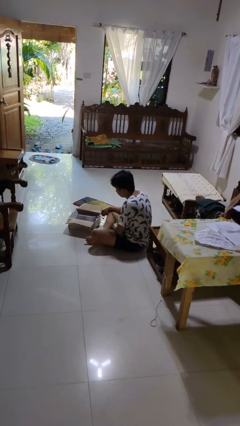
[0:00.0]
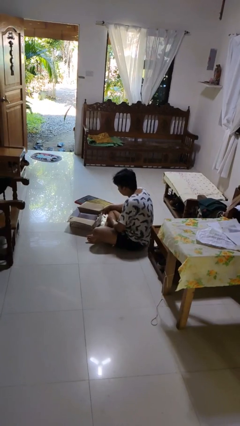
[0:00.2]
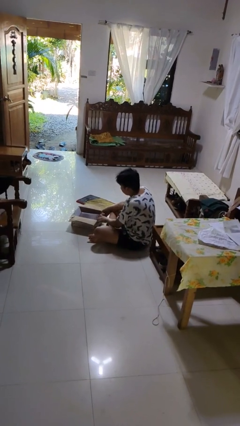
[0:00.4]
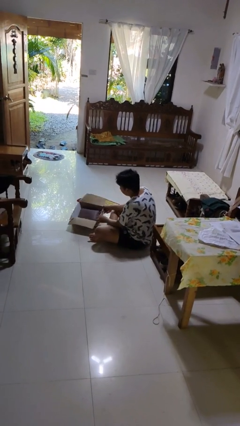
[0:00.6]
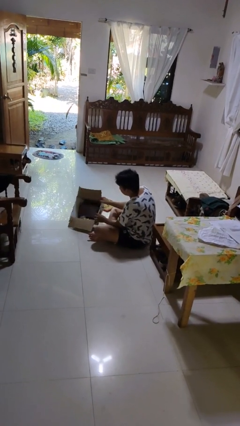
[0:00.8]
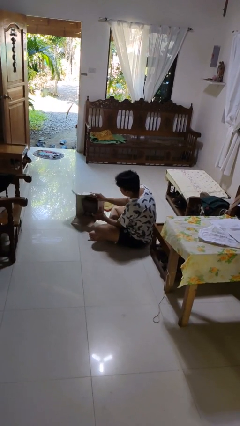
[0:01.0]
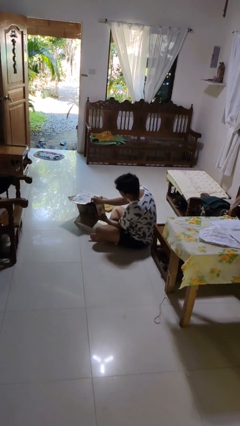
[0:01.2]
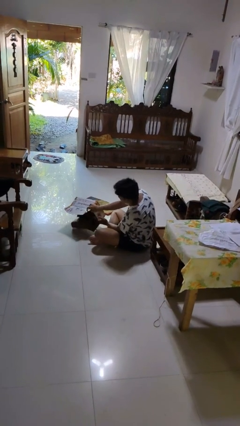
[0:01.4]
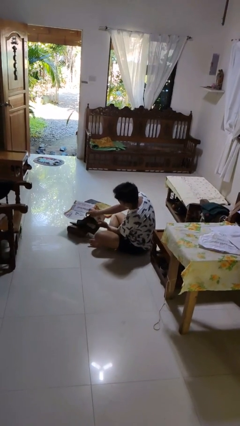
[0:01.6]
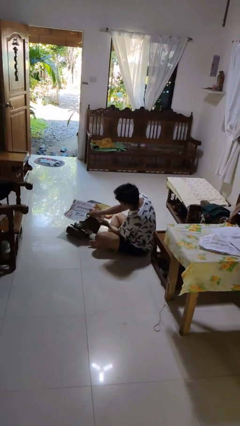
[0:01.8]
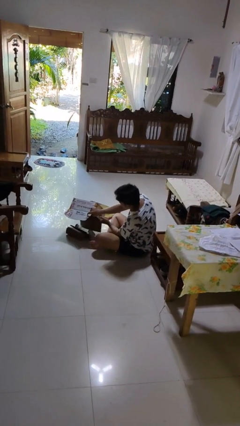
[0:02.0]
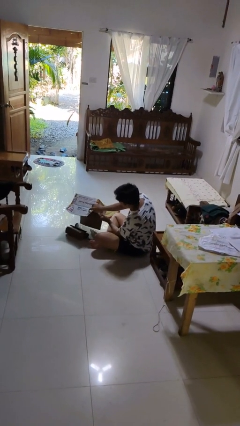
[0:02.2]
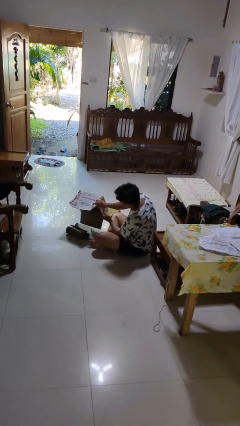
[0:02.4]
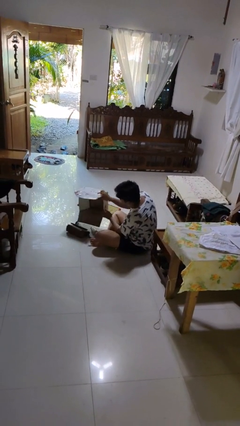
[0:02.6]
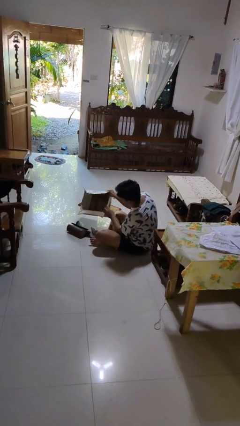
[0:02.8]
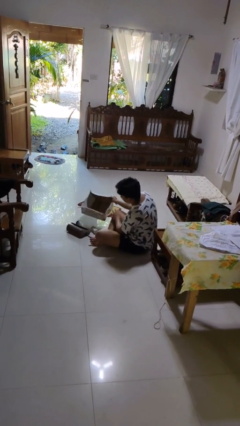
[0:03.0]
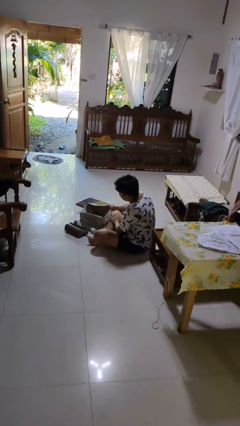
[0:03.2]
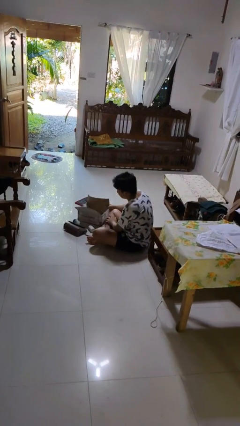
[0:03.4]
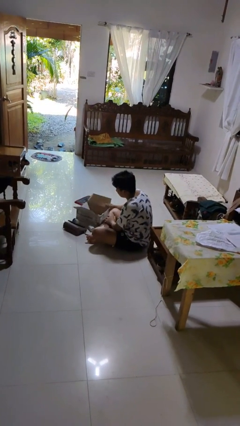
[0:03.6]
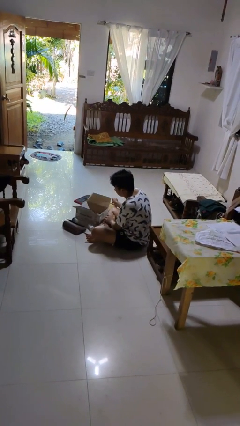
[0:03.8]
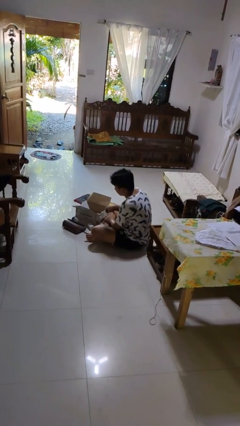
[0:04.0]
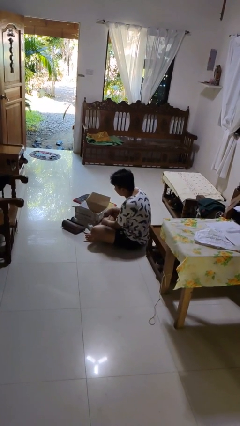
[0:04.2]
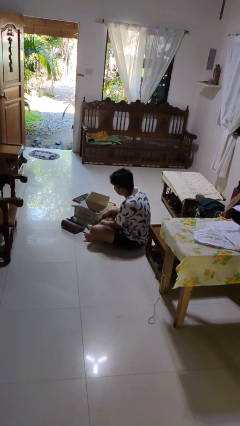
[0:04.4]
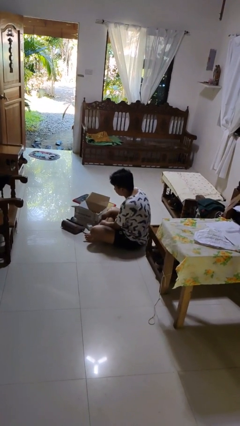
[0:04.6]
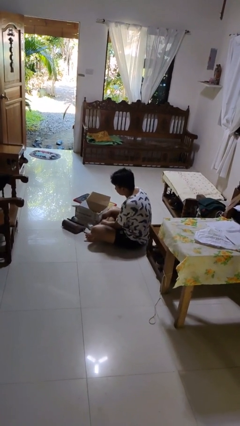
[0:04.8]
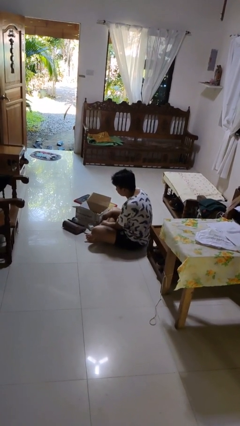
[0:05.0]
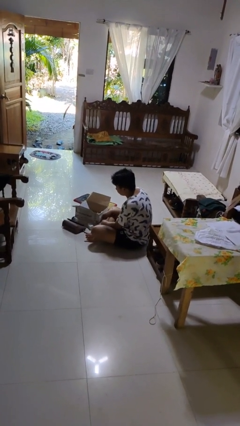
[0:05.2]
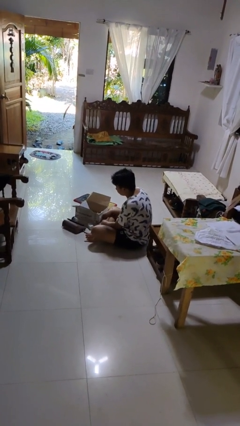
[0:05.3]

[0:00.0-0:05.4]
person unloads box onto floor

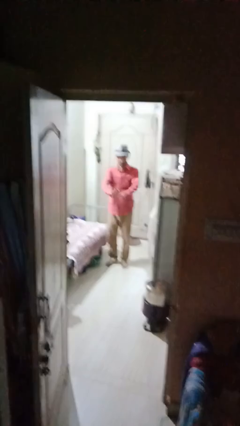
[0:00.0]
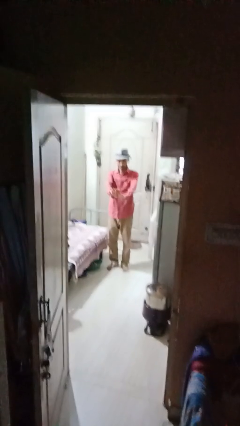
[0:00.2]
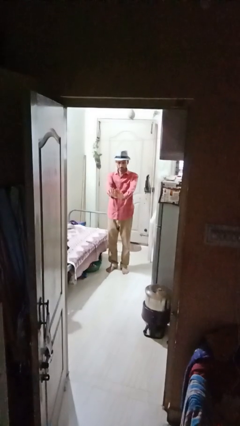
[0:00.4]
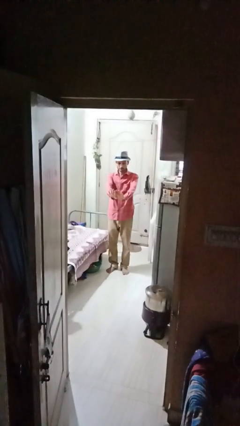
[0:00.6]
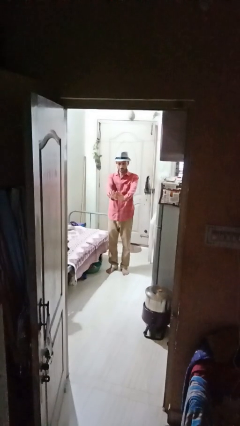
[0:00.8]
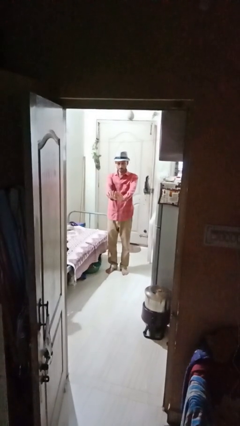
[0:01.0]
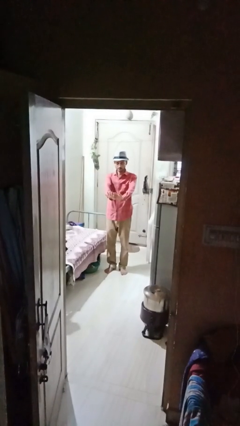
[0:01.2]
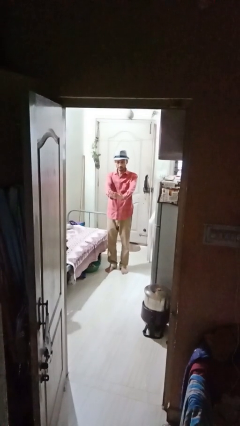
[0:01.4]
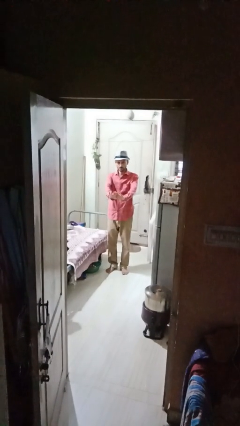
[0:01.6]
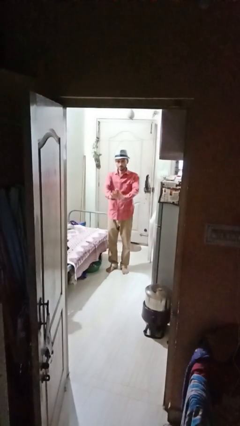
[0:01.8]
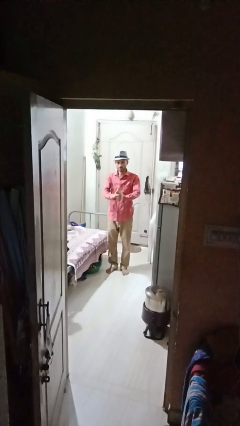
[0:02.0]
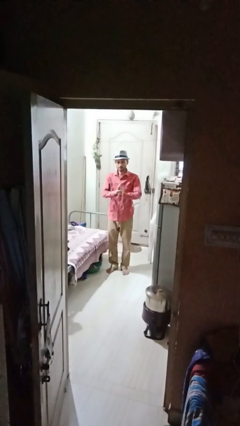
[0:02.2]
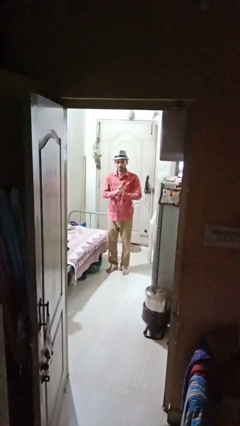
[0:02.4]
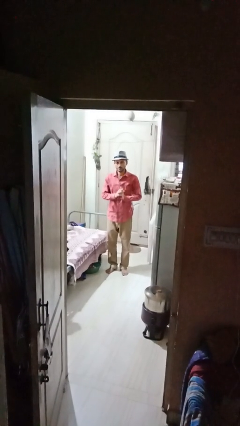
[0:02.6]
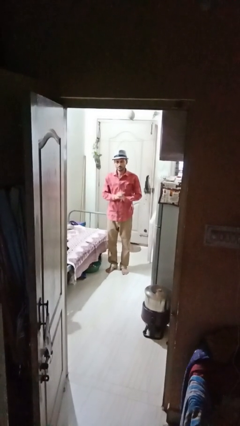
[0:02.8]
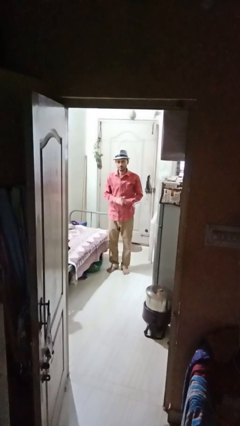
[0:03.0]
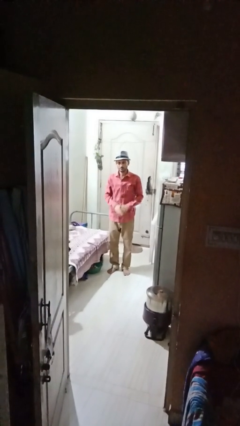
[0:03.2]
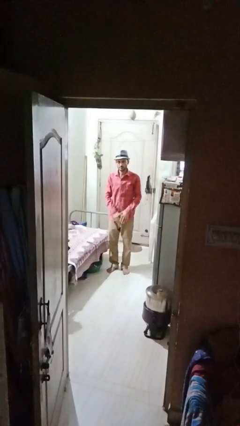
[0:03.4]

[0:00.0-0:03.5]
person cracks knuckles

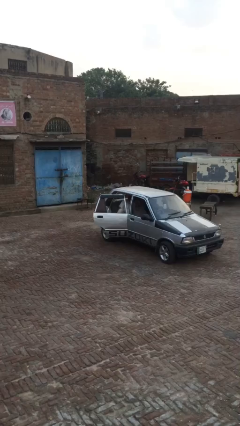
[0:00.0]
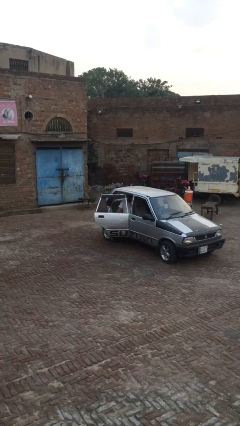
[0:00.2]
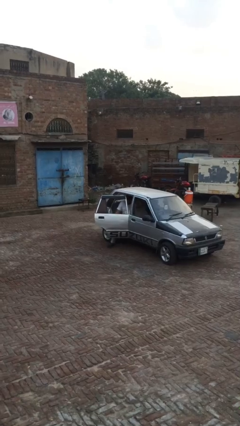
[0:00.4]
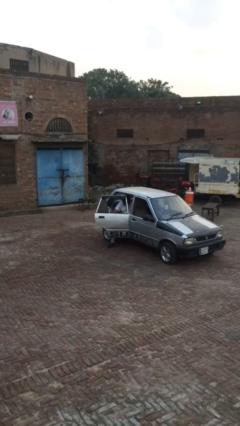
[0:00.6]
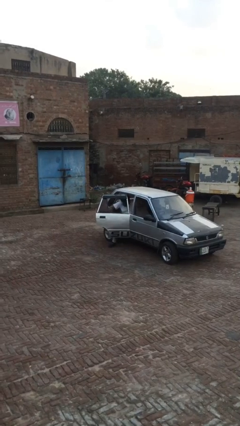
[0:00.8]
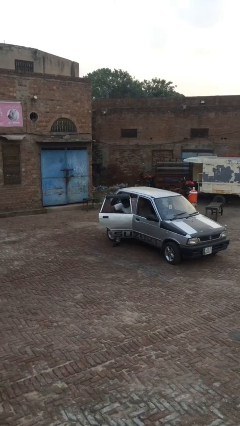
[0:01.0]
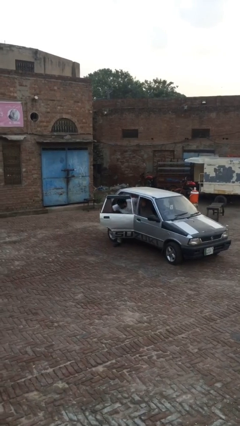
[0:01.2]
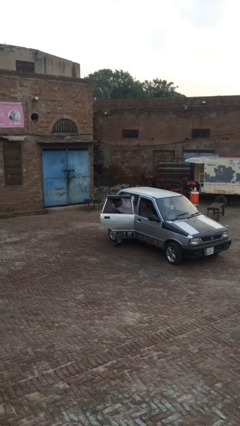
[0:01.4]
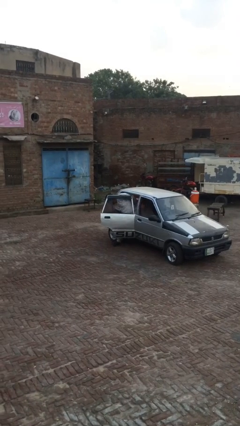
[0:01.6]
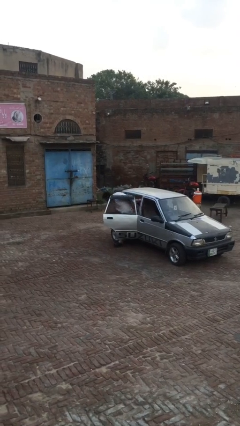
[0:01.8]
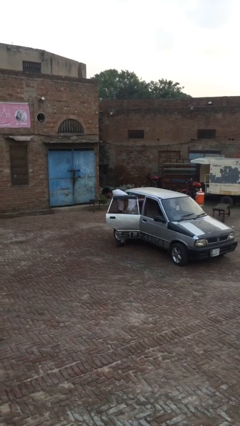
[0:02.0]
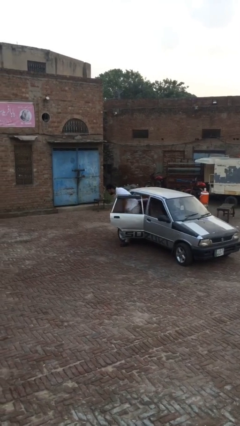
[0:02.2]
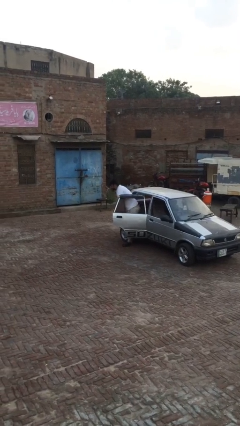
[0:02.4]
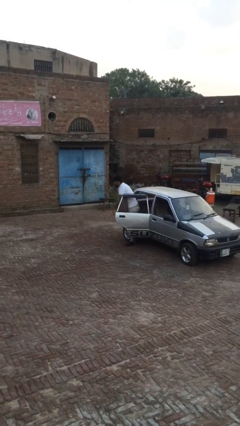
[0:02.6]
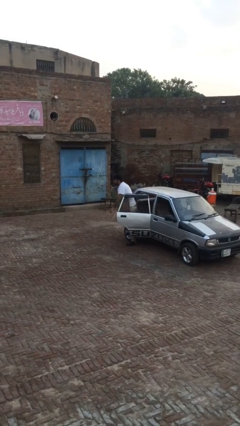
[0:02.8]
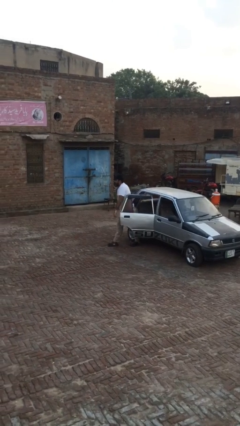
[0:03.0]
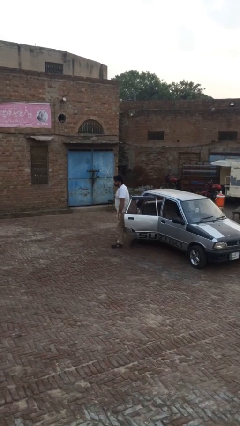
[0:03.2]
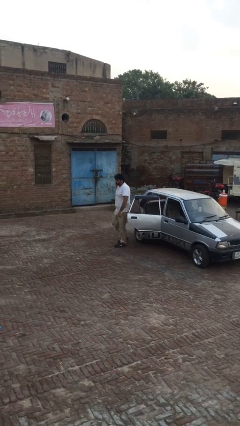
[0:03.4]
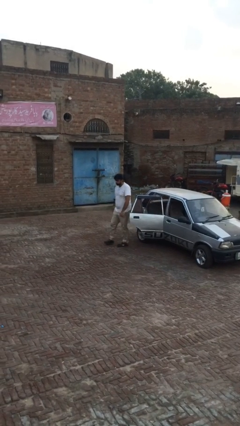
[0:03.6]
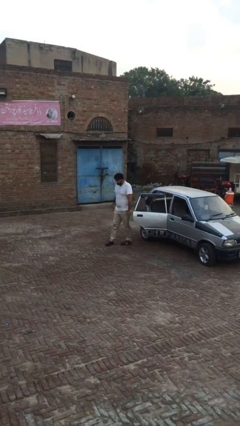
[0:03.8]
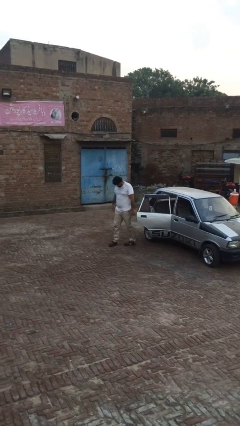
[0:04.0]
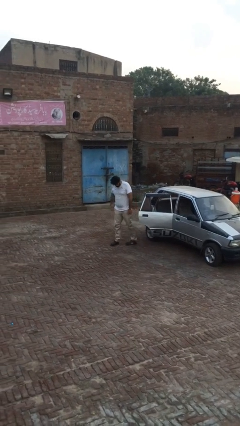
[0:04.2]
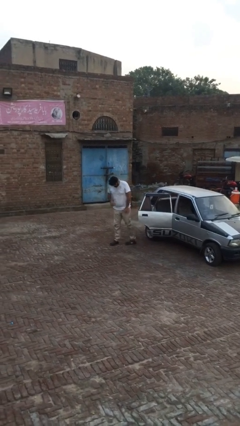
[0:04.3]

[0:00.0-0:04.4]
person exits car

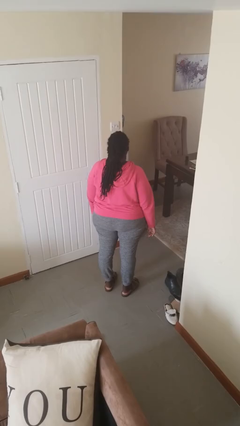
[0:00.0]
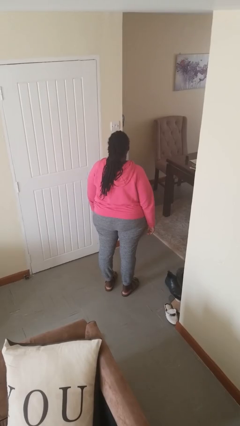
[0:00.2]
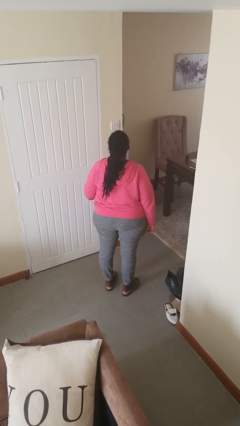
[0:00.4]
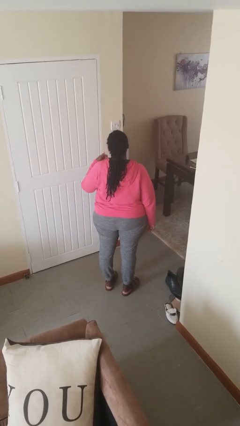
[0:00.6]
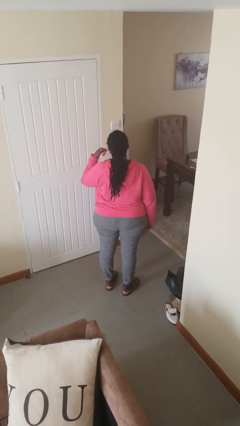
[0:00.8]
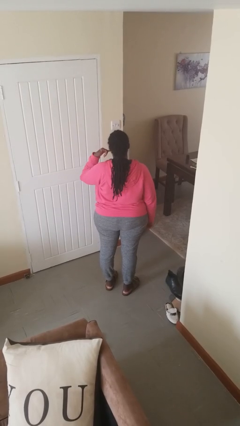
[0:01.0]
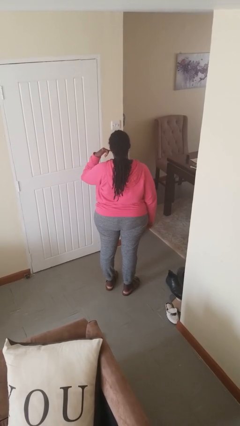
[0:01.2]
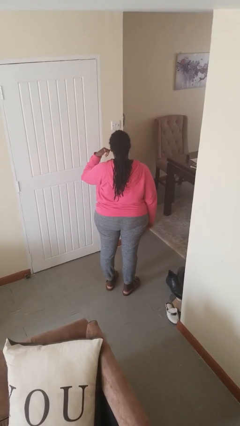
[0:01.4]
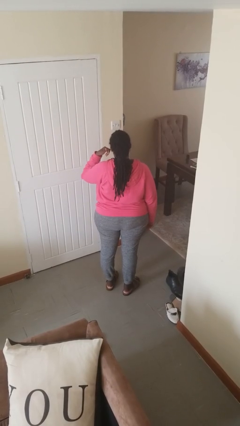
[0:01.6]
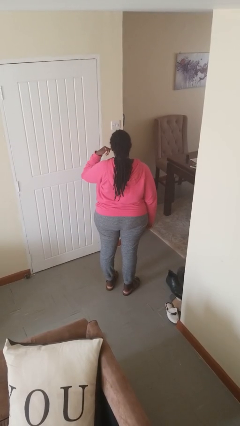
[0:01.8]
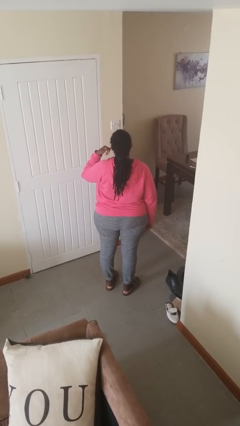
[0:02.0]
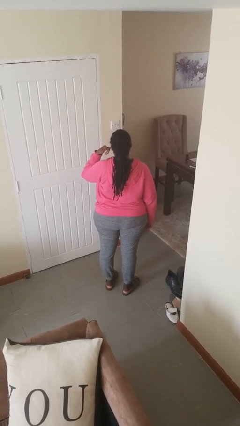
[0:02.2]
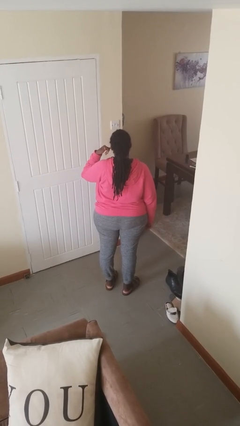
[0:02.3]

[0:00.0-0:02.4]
person gestures call me

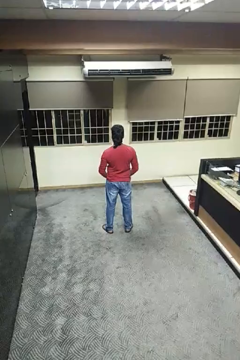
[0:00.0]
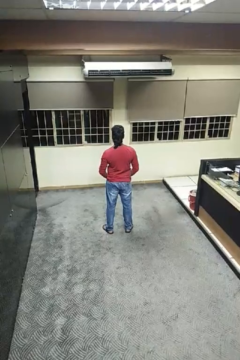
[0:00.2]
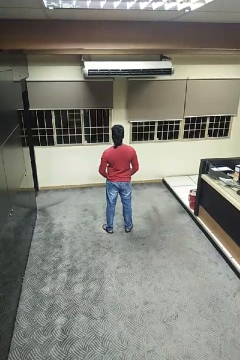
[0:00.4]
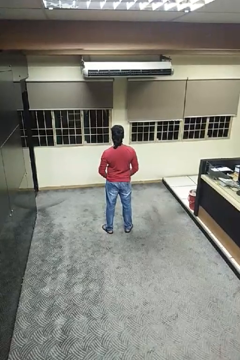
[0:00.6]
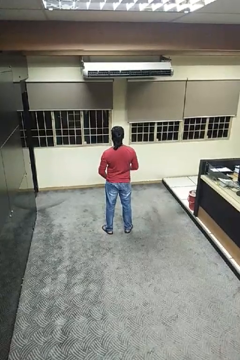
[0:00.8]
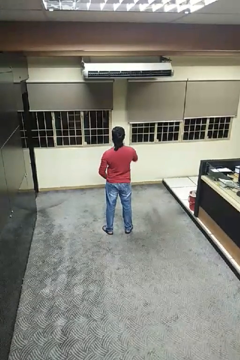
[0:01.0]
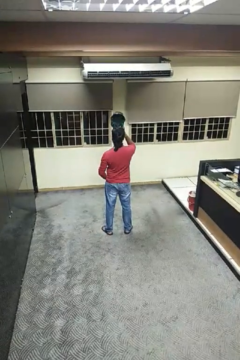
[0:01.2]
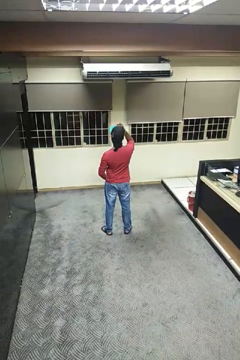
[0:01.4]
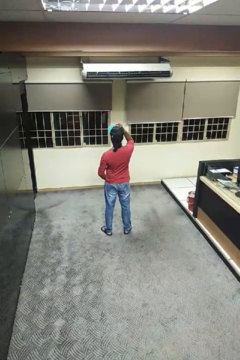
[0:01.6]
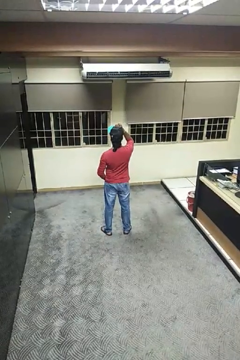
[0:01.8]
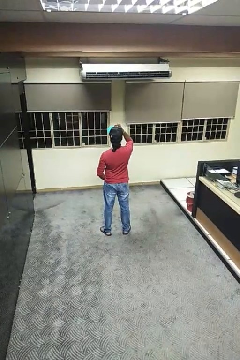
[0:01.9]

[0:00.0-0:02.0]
person puts on hat

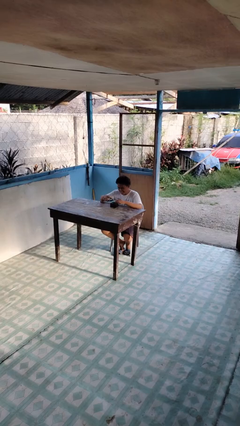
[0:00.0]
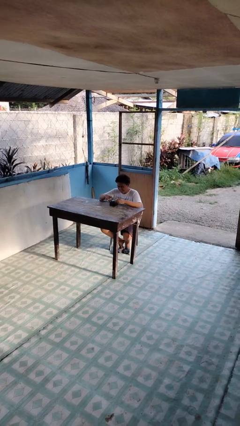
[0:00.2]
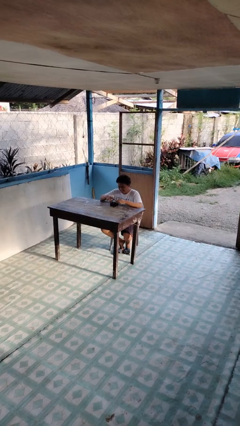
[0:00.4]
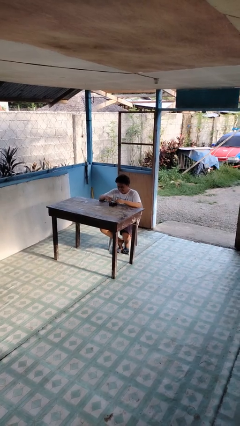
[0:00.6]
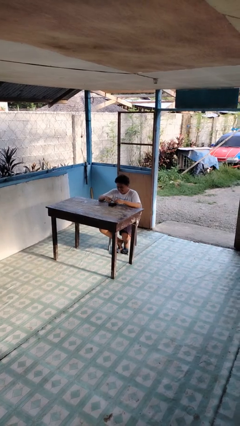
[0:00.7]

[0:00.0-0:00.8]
person closes jewelry box

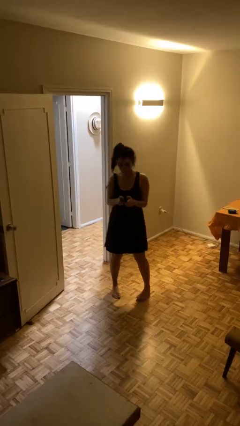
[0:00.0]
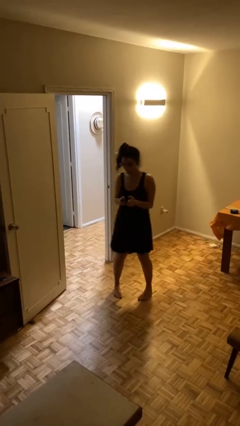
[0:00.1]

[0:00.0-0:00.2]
person exits scene through structure
